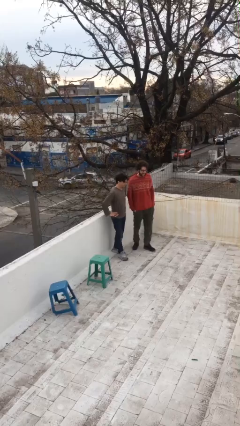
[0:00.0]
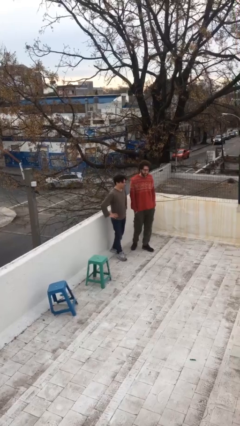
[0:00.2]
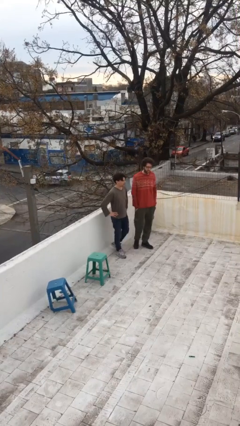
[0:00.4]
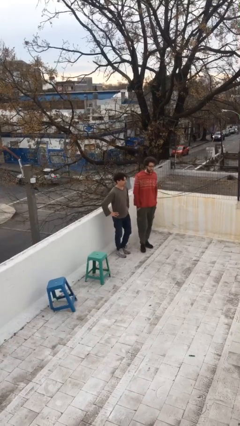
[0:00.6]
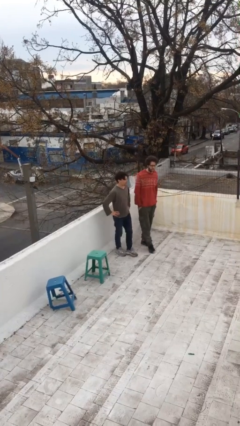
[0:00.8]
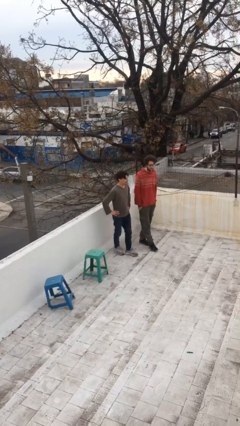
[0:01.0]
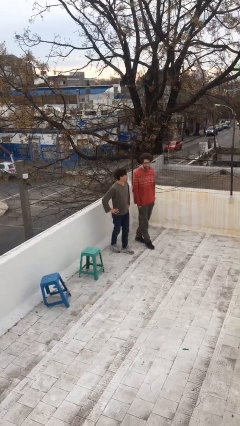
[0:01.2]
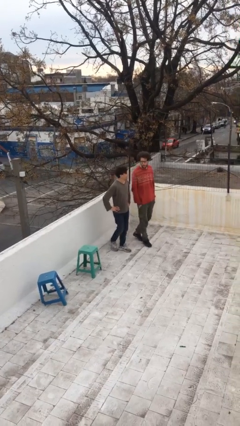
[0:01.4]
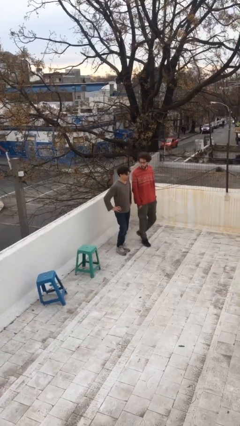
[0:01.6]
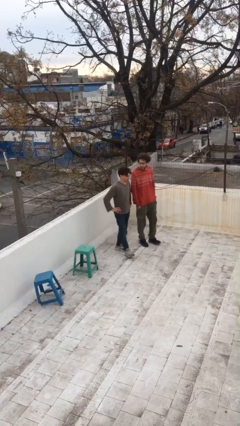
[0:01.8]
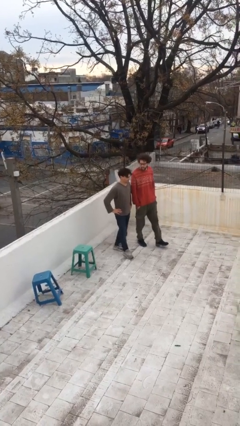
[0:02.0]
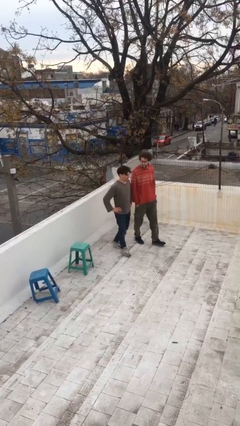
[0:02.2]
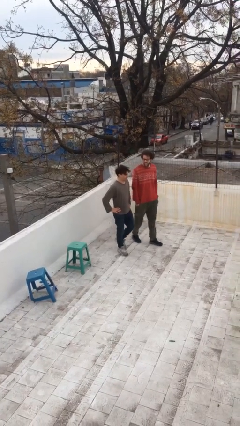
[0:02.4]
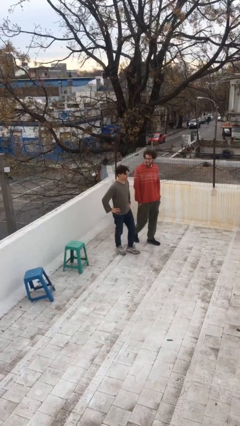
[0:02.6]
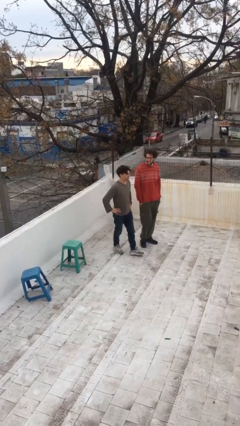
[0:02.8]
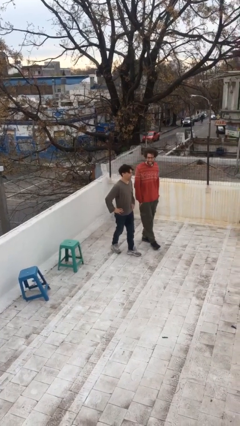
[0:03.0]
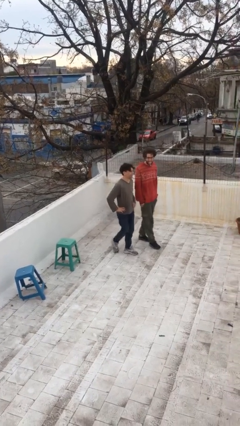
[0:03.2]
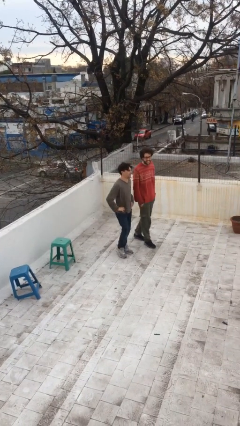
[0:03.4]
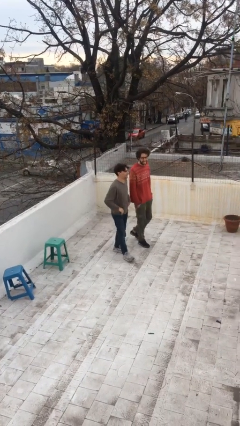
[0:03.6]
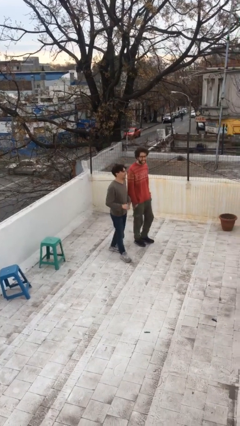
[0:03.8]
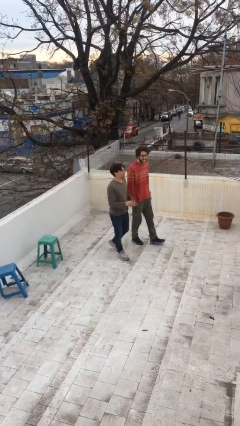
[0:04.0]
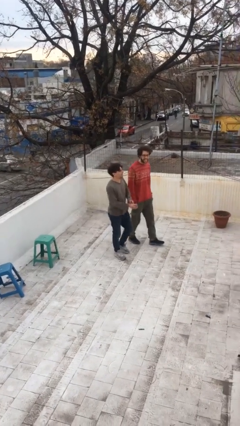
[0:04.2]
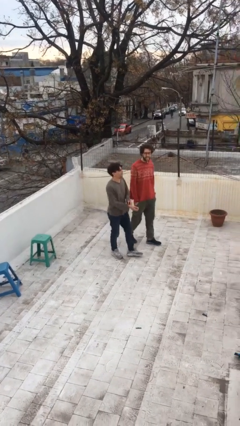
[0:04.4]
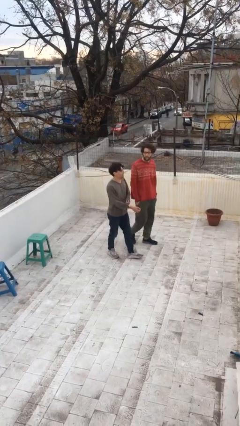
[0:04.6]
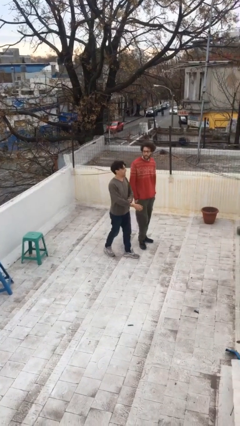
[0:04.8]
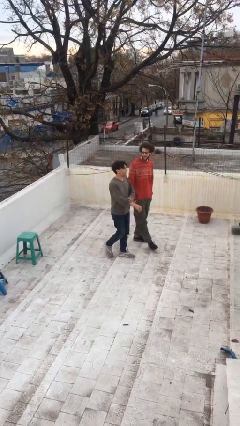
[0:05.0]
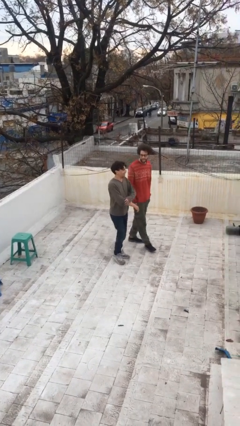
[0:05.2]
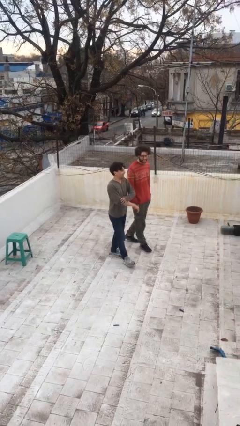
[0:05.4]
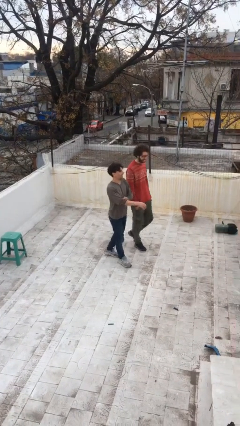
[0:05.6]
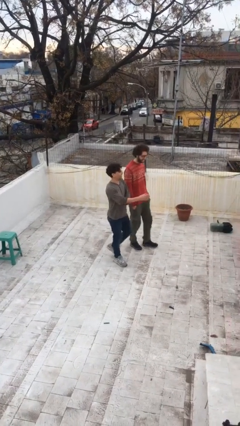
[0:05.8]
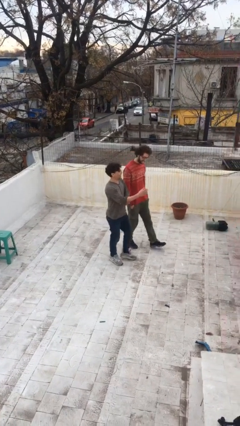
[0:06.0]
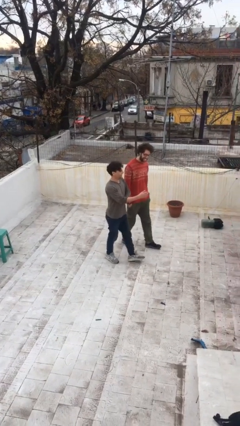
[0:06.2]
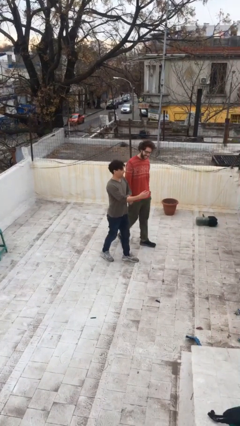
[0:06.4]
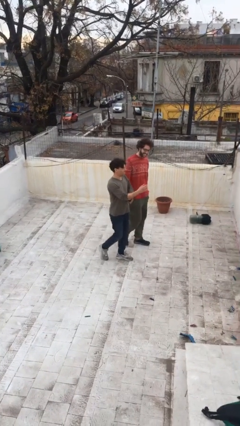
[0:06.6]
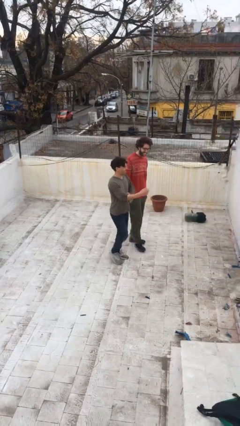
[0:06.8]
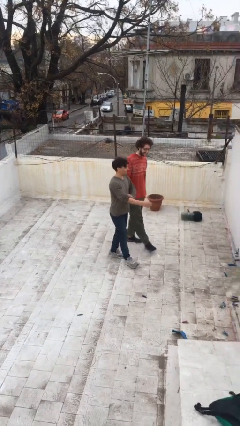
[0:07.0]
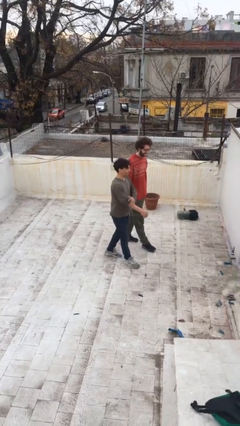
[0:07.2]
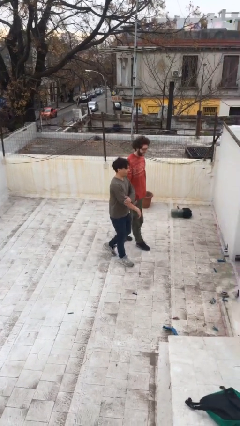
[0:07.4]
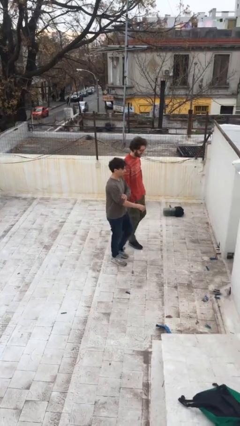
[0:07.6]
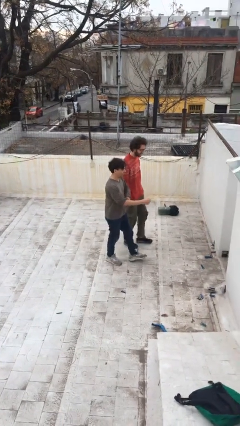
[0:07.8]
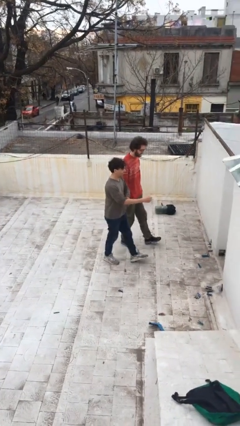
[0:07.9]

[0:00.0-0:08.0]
person talks to person

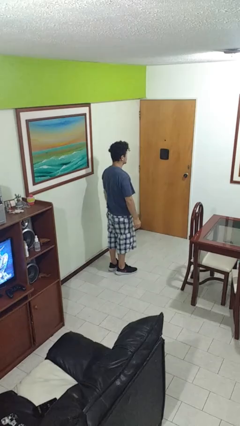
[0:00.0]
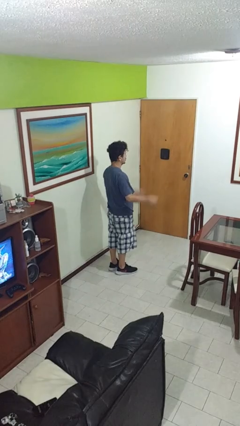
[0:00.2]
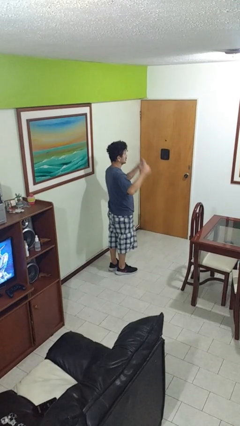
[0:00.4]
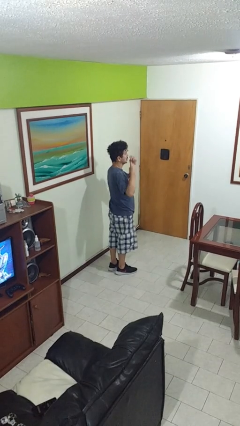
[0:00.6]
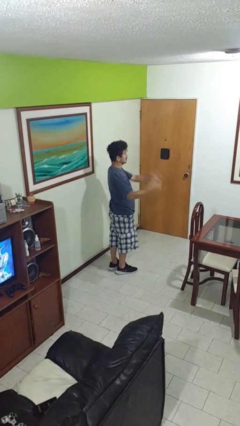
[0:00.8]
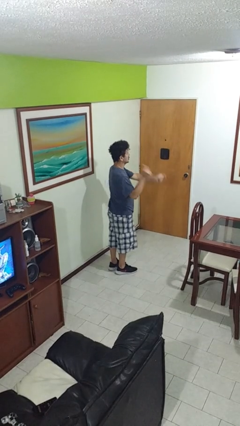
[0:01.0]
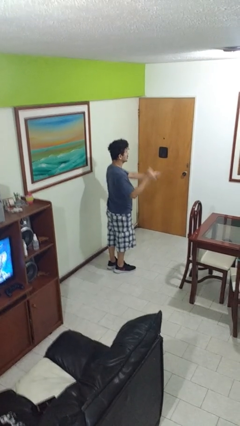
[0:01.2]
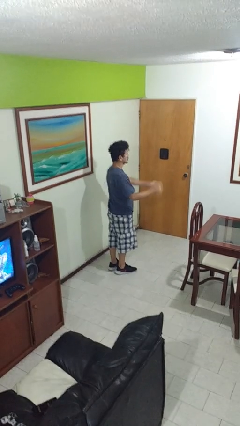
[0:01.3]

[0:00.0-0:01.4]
person snaps fingers

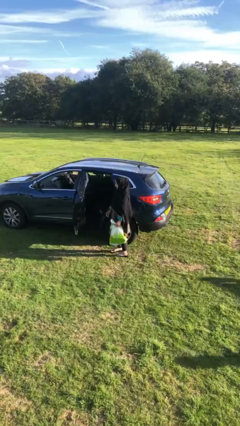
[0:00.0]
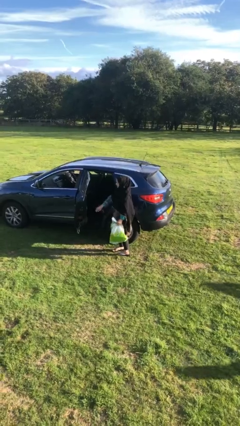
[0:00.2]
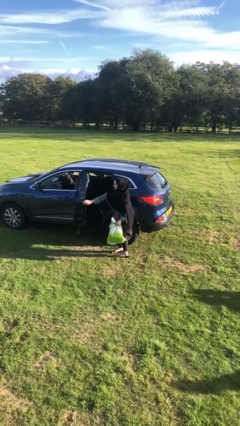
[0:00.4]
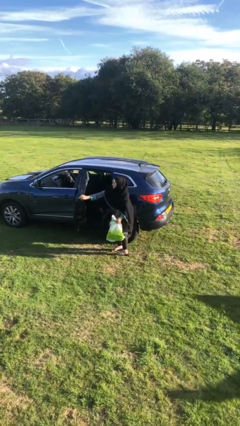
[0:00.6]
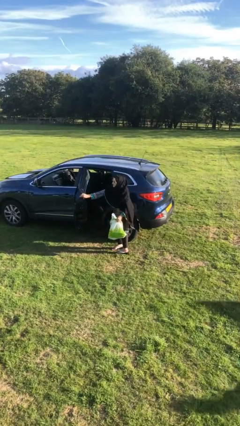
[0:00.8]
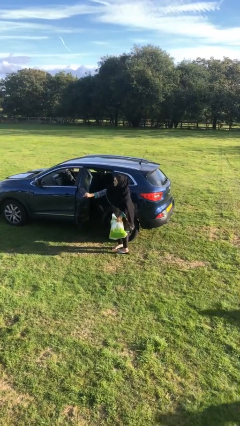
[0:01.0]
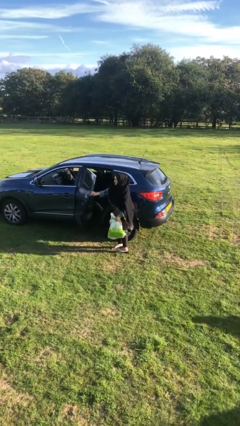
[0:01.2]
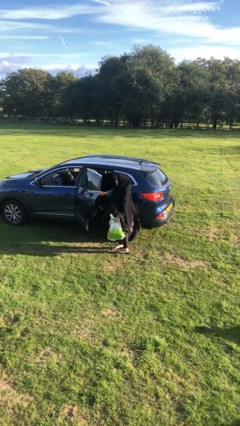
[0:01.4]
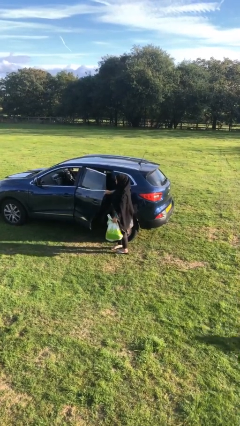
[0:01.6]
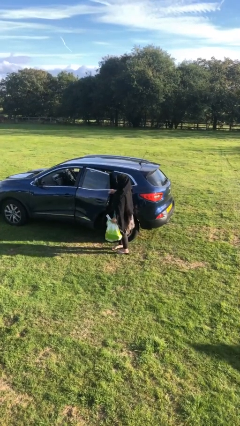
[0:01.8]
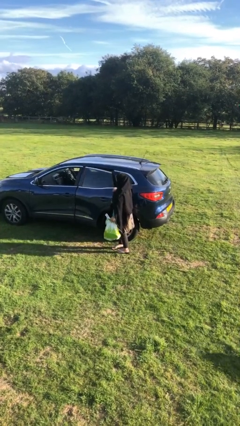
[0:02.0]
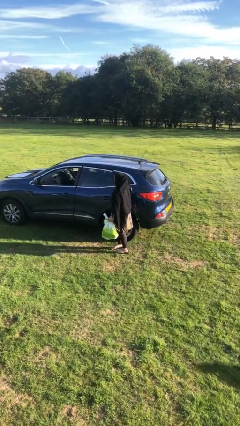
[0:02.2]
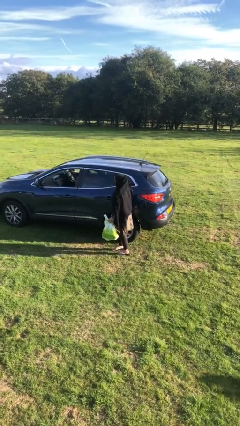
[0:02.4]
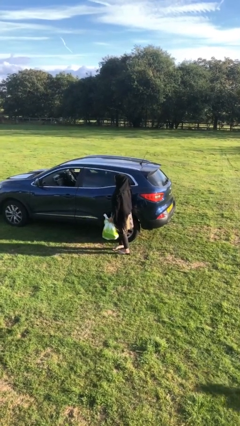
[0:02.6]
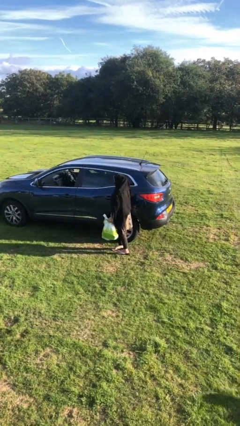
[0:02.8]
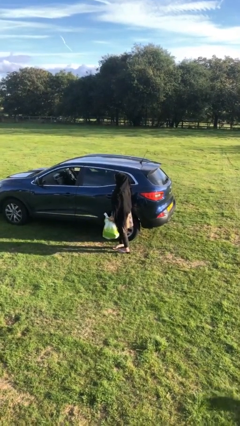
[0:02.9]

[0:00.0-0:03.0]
person closes car door

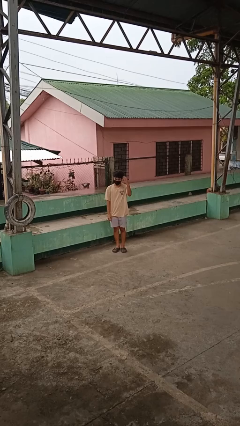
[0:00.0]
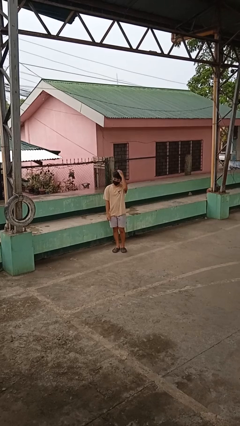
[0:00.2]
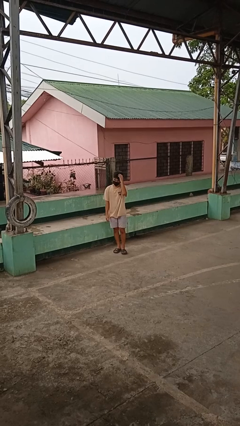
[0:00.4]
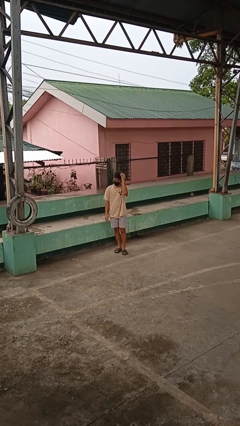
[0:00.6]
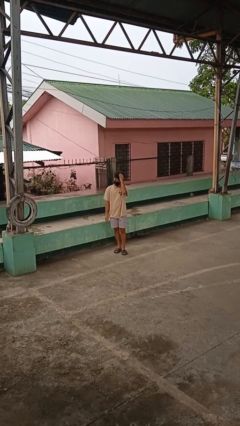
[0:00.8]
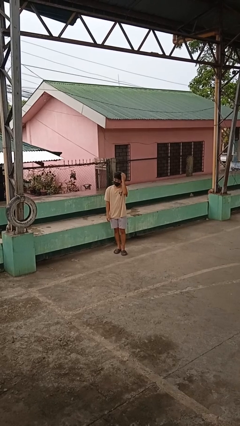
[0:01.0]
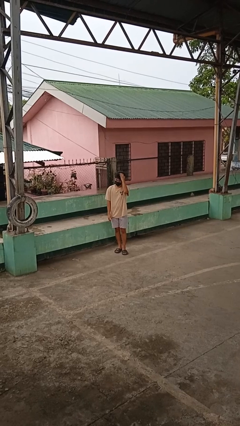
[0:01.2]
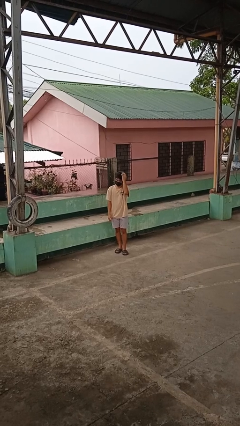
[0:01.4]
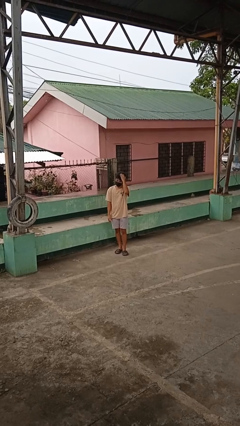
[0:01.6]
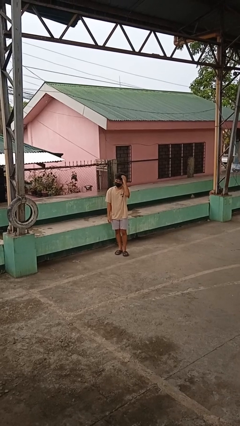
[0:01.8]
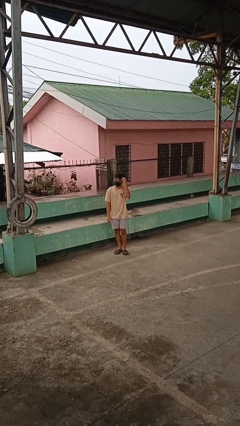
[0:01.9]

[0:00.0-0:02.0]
person pats head

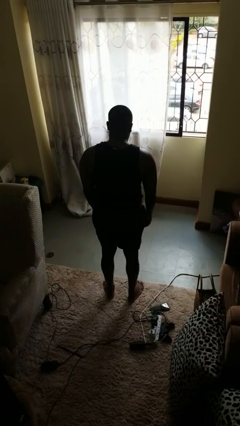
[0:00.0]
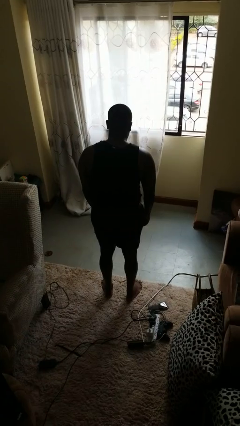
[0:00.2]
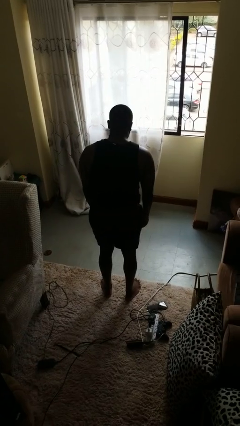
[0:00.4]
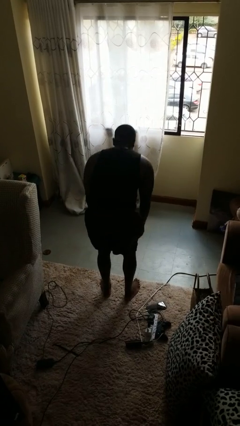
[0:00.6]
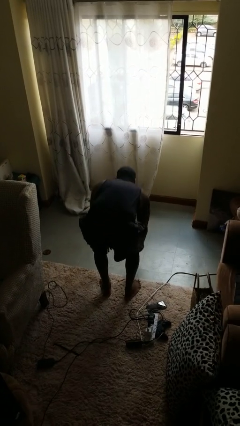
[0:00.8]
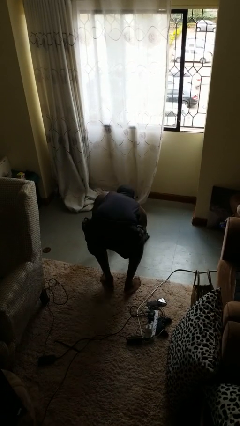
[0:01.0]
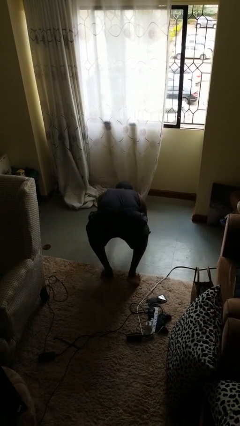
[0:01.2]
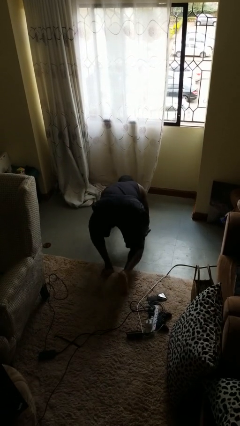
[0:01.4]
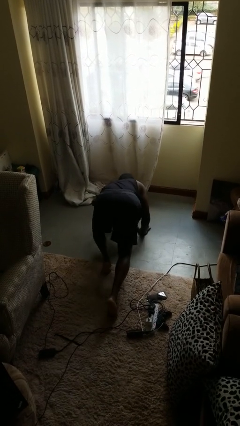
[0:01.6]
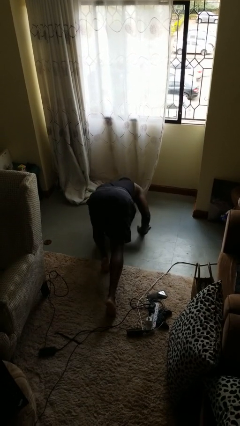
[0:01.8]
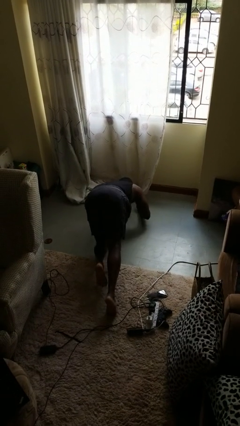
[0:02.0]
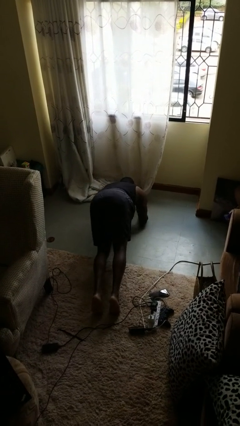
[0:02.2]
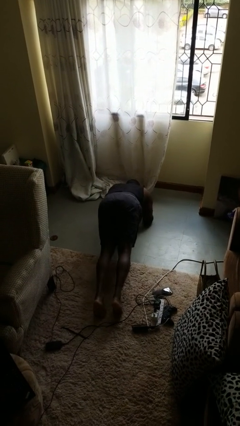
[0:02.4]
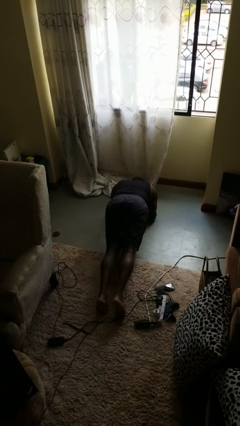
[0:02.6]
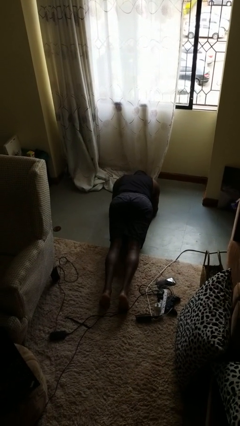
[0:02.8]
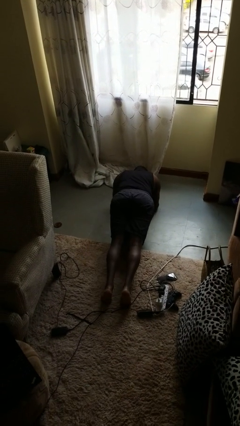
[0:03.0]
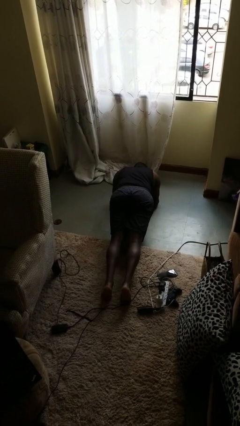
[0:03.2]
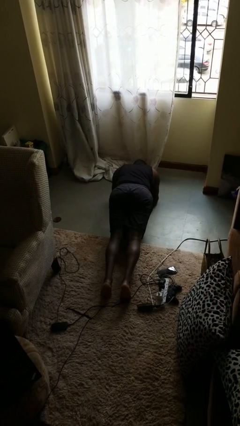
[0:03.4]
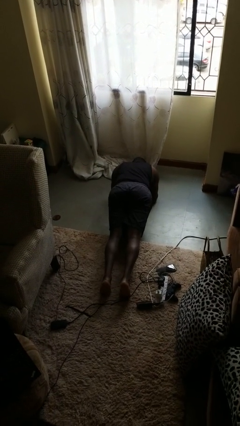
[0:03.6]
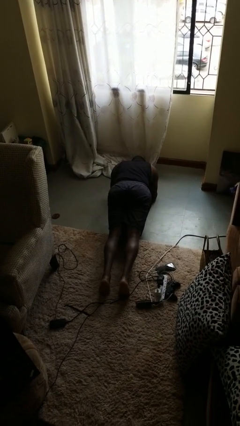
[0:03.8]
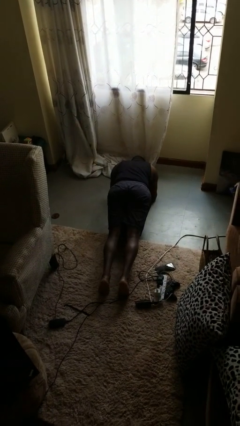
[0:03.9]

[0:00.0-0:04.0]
person exercises with plank
